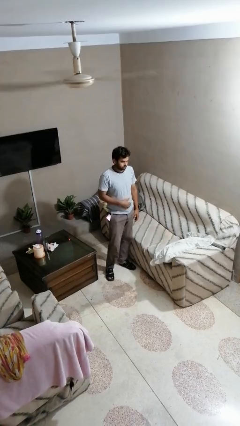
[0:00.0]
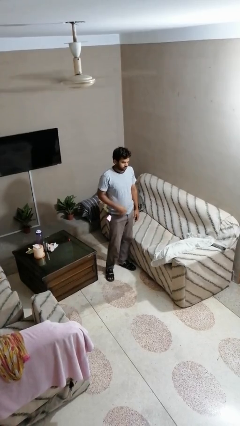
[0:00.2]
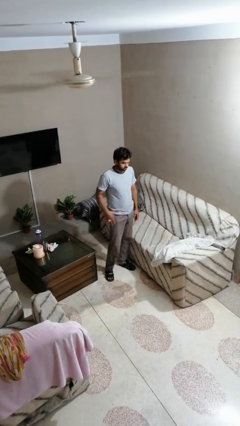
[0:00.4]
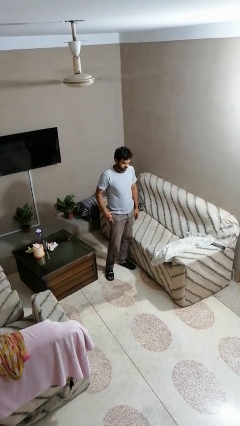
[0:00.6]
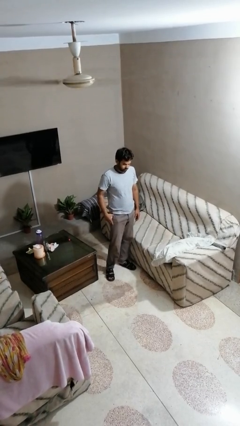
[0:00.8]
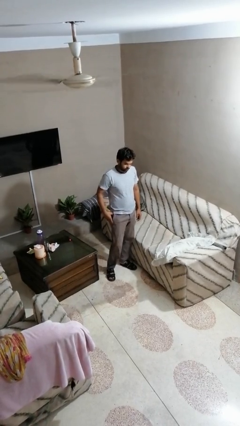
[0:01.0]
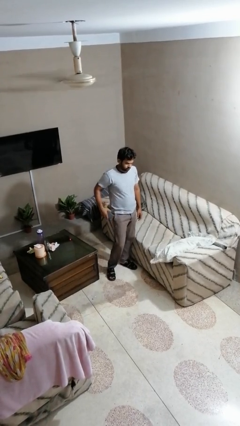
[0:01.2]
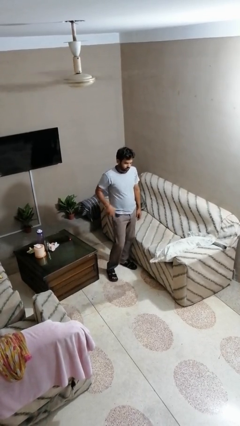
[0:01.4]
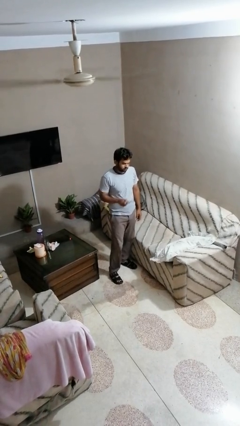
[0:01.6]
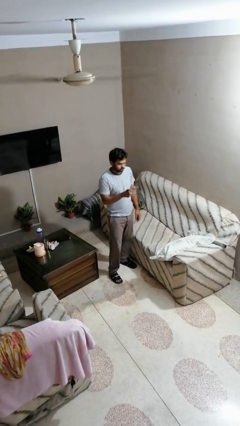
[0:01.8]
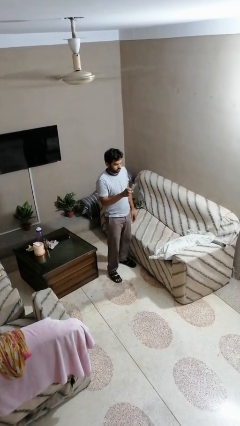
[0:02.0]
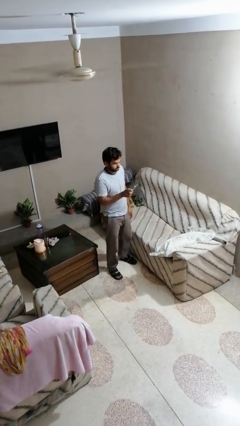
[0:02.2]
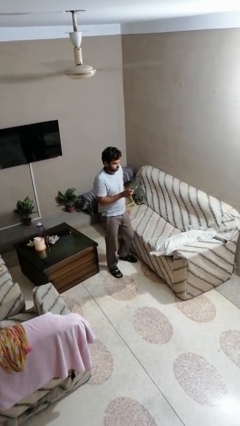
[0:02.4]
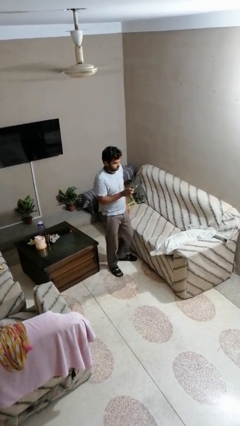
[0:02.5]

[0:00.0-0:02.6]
person takes phone from pocket

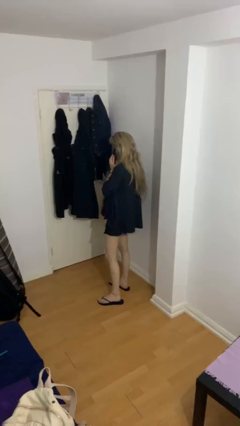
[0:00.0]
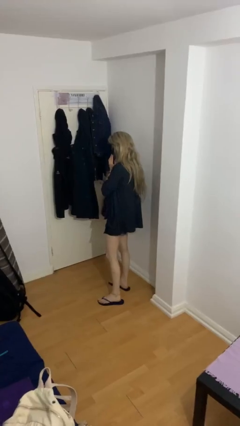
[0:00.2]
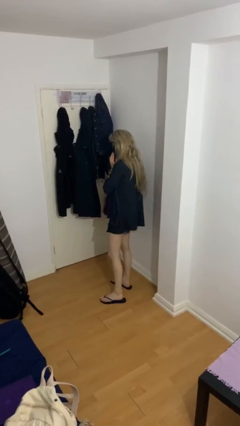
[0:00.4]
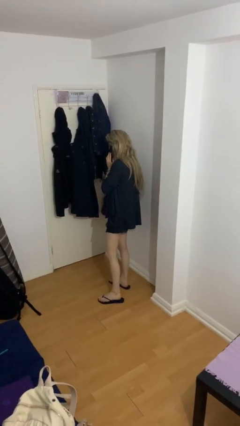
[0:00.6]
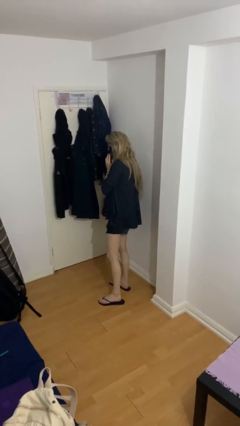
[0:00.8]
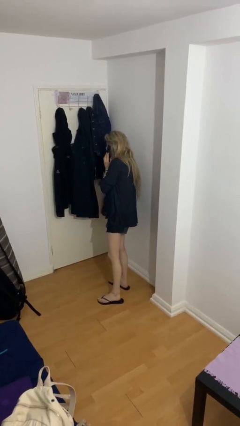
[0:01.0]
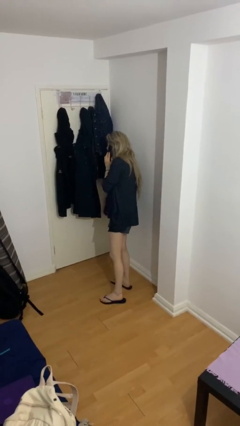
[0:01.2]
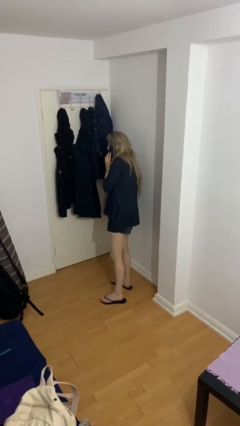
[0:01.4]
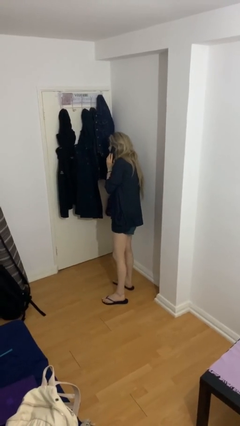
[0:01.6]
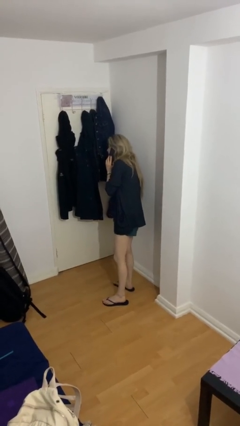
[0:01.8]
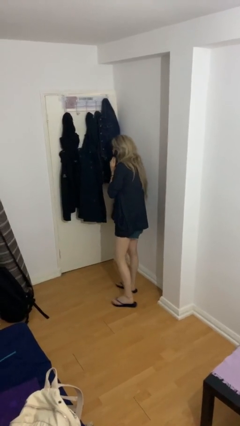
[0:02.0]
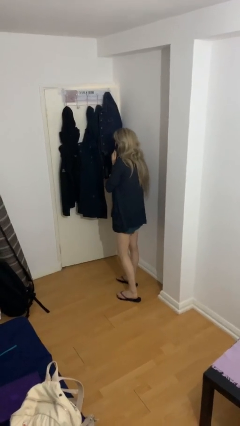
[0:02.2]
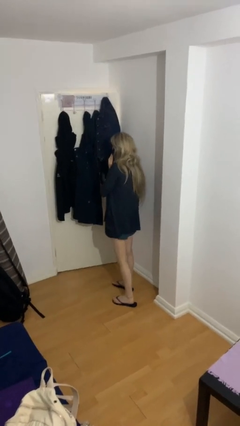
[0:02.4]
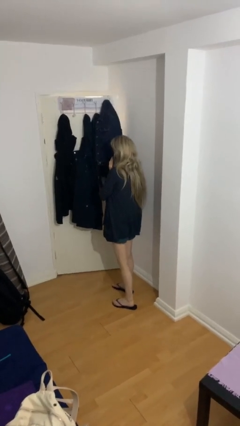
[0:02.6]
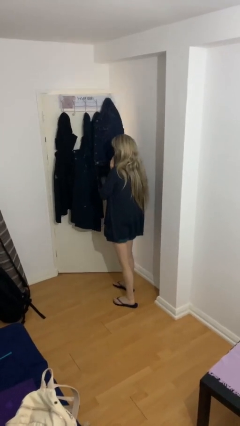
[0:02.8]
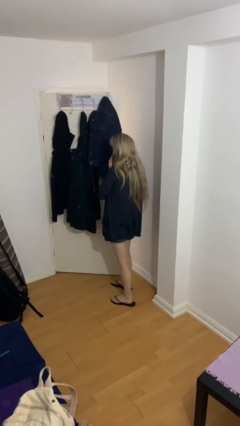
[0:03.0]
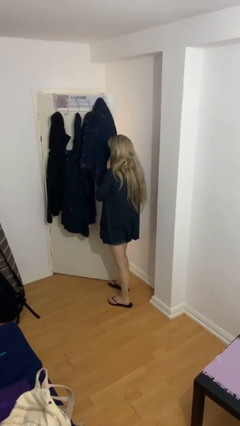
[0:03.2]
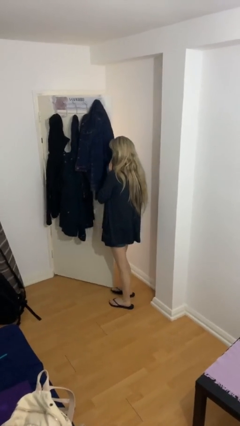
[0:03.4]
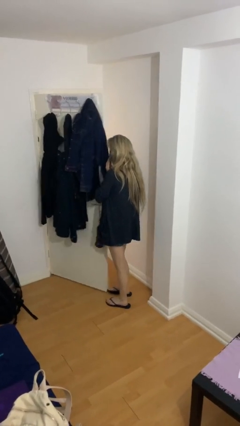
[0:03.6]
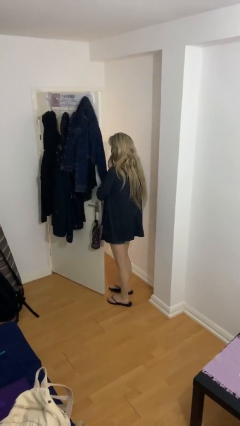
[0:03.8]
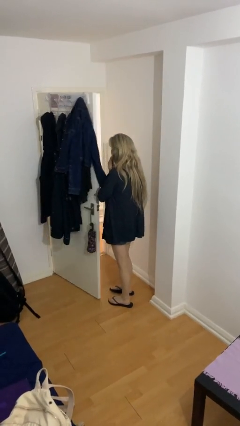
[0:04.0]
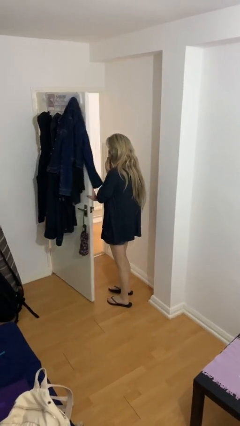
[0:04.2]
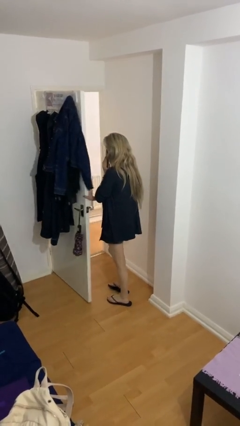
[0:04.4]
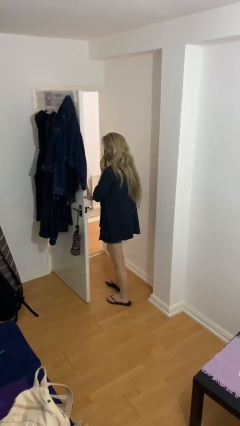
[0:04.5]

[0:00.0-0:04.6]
person opens facility door

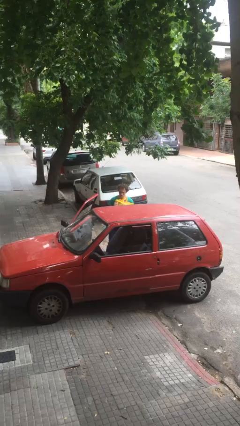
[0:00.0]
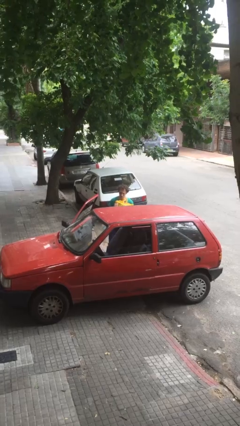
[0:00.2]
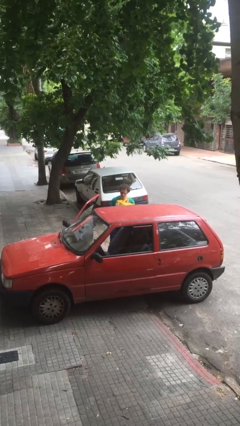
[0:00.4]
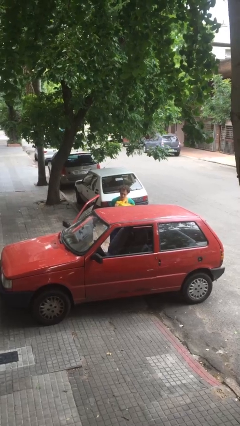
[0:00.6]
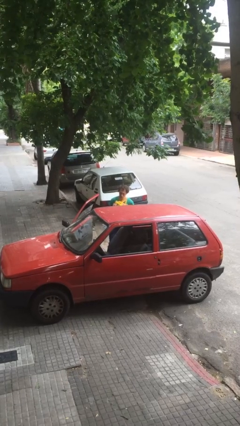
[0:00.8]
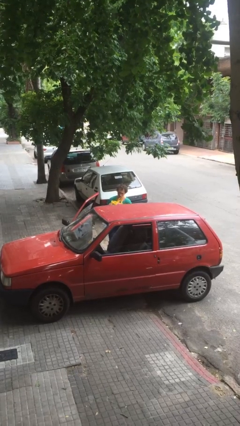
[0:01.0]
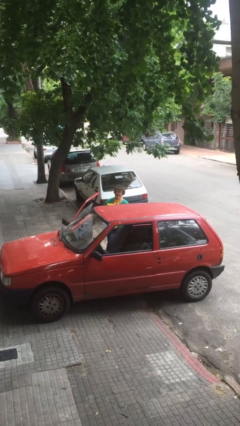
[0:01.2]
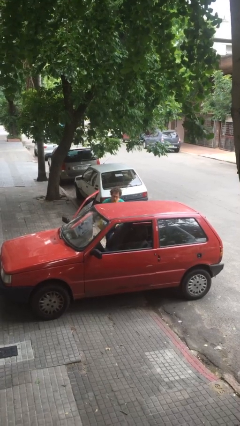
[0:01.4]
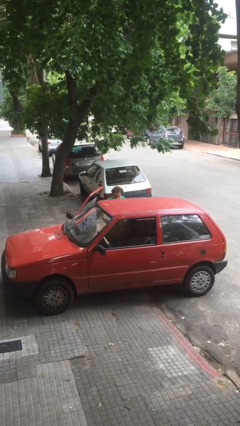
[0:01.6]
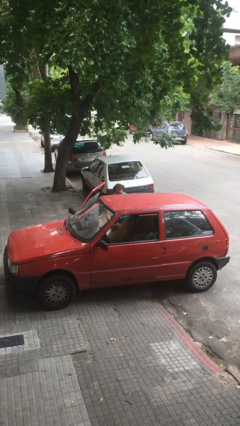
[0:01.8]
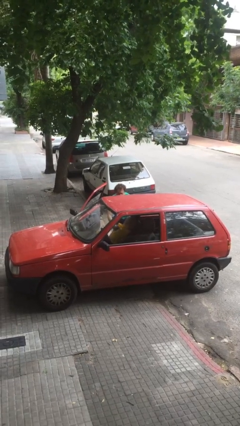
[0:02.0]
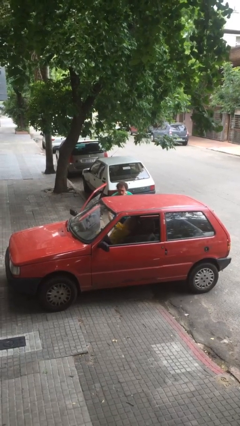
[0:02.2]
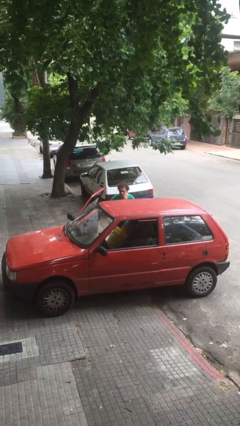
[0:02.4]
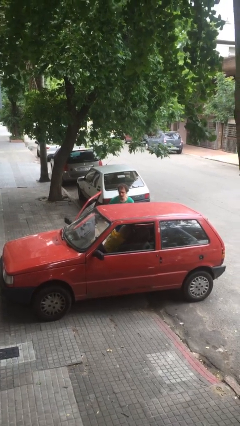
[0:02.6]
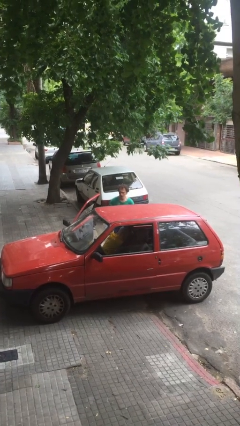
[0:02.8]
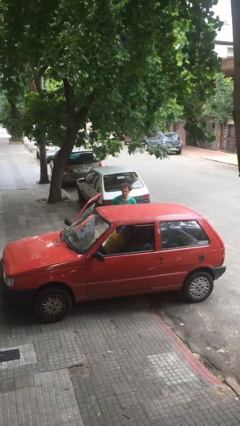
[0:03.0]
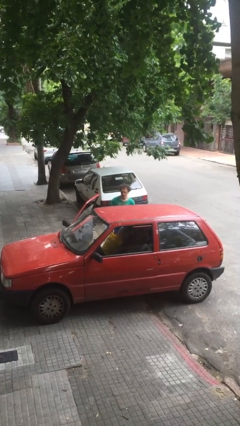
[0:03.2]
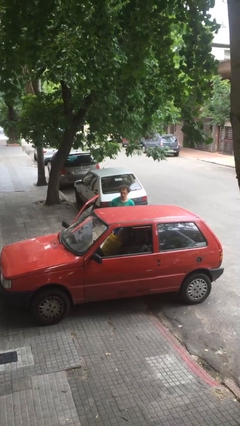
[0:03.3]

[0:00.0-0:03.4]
person loads car

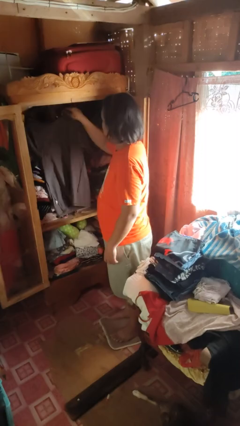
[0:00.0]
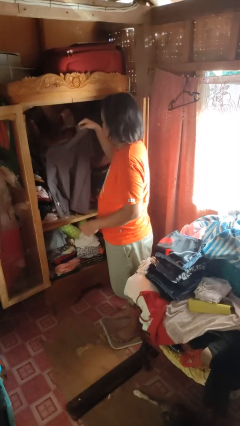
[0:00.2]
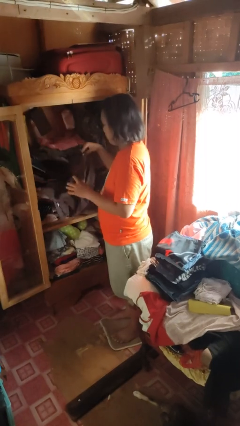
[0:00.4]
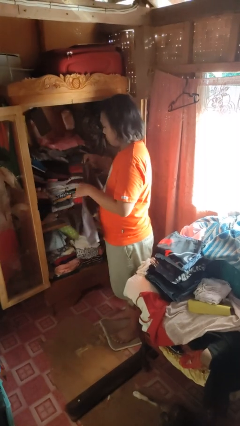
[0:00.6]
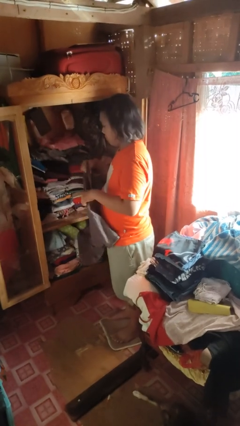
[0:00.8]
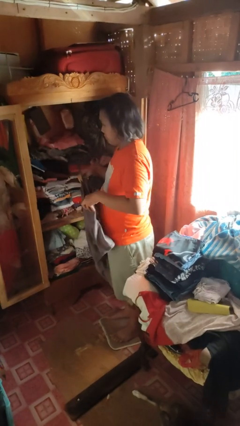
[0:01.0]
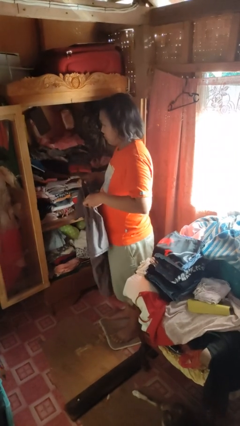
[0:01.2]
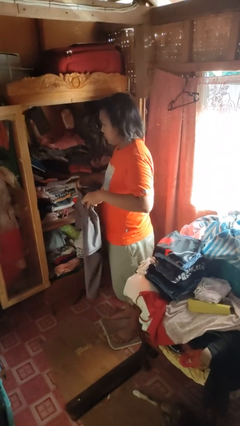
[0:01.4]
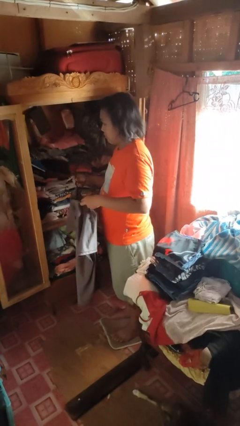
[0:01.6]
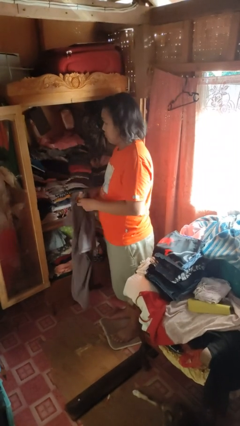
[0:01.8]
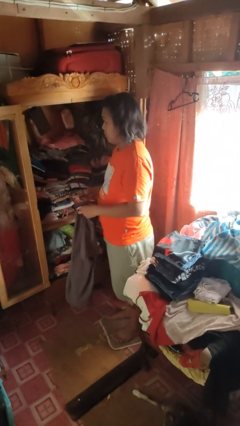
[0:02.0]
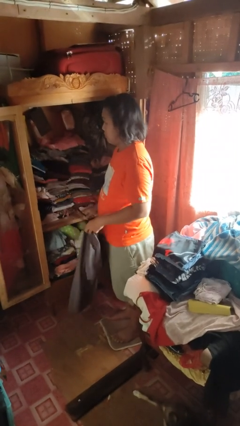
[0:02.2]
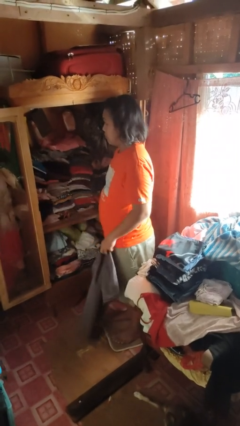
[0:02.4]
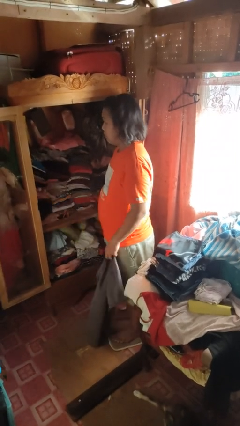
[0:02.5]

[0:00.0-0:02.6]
person takes clothes from closet

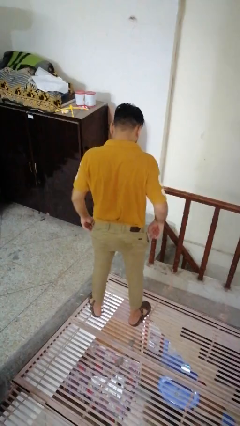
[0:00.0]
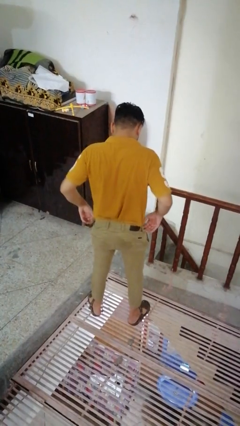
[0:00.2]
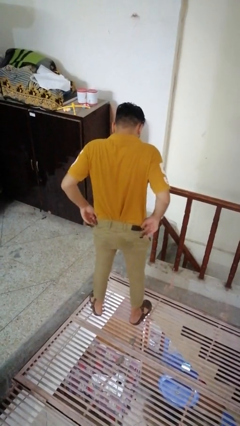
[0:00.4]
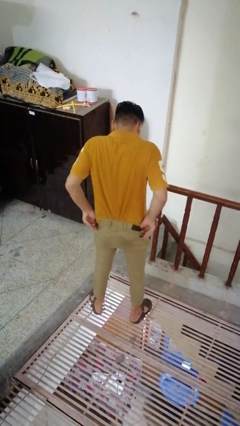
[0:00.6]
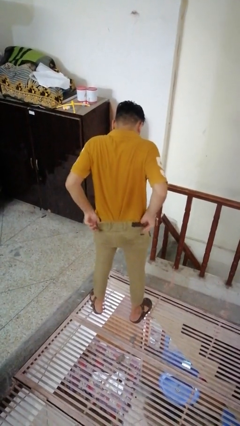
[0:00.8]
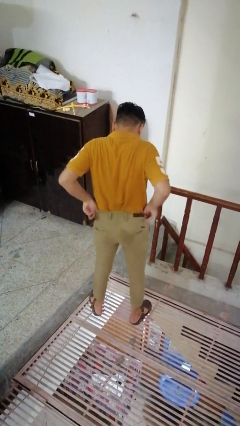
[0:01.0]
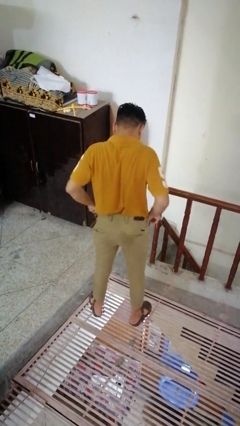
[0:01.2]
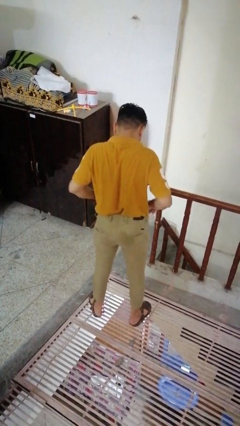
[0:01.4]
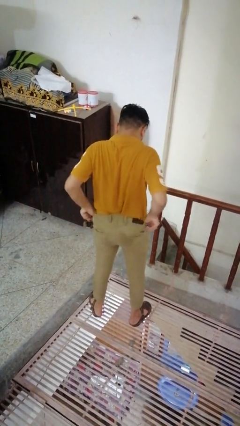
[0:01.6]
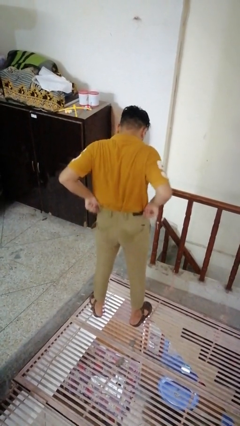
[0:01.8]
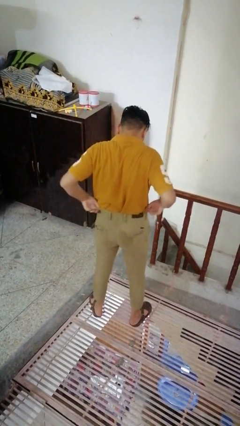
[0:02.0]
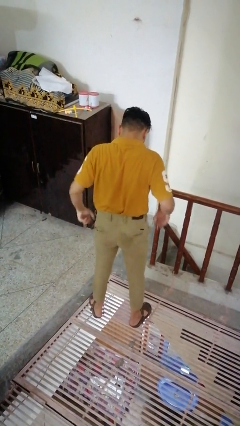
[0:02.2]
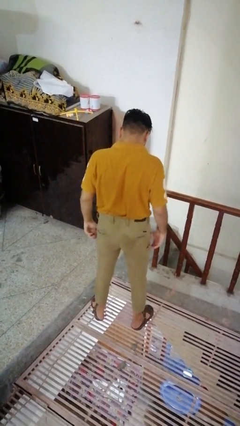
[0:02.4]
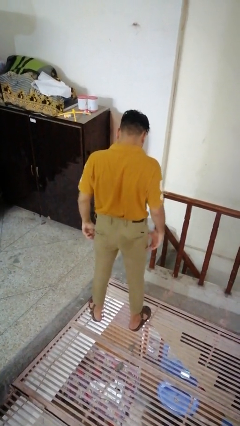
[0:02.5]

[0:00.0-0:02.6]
person hikes up pants

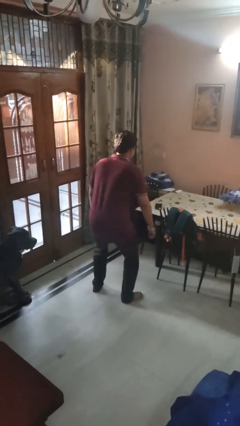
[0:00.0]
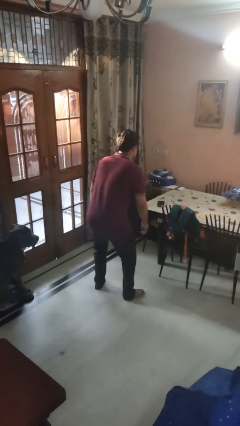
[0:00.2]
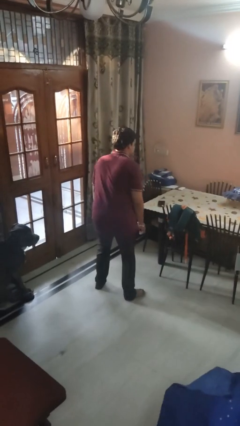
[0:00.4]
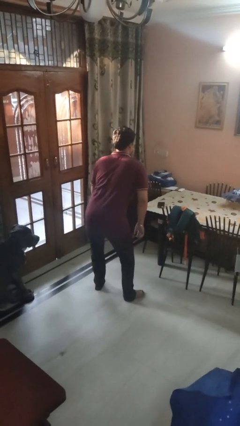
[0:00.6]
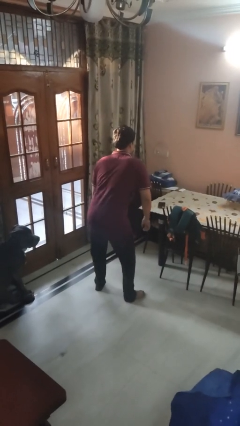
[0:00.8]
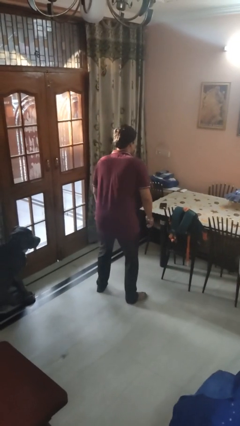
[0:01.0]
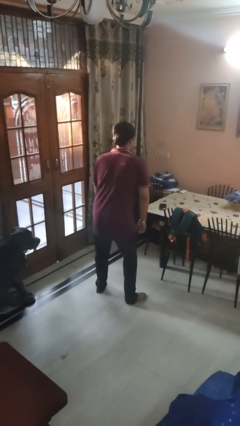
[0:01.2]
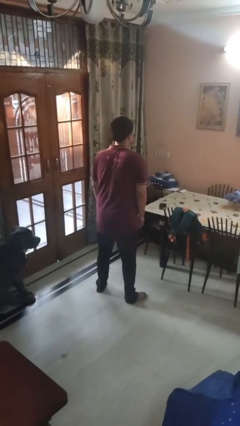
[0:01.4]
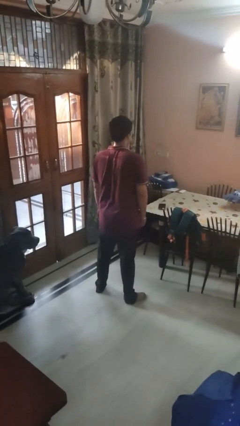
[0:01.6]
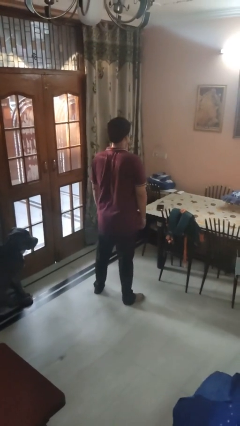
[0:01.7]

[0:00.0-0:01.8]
person wiggles hips
